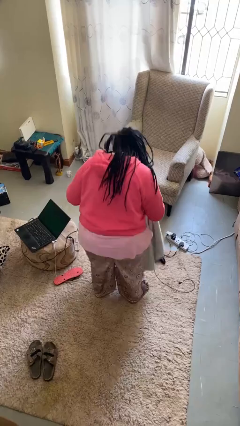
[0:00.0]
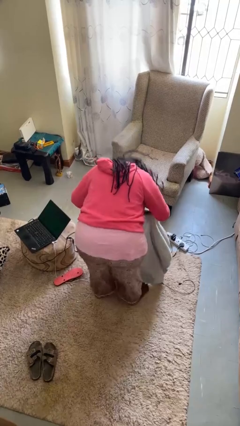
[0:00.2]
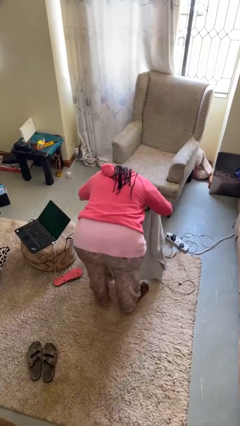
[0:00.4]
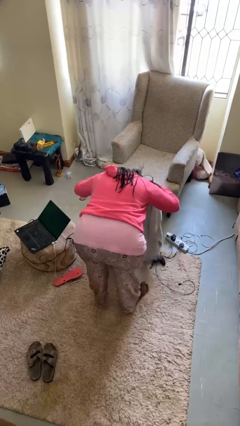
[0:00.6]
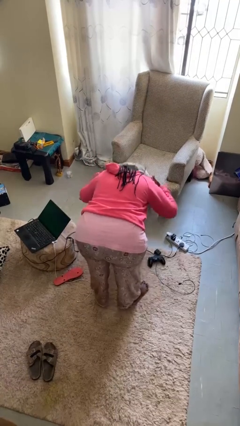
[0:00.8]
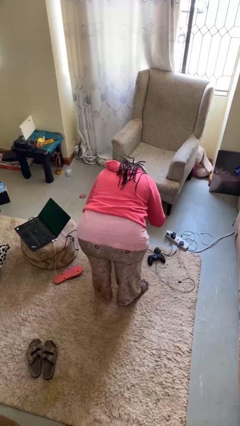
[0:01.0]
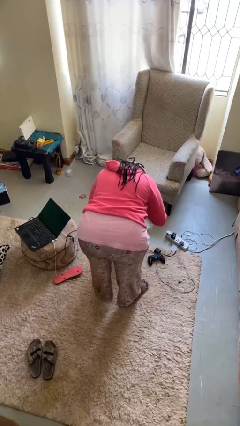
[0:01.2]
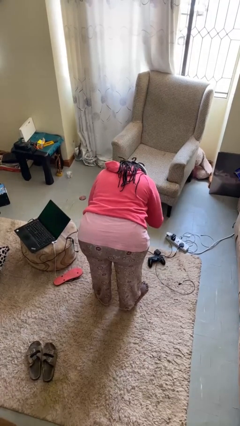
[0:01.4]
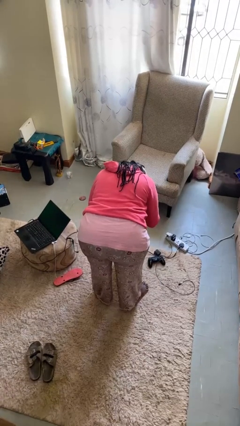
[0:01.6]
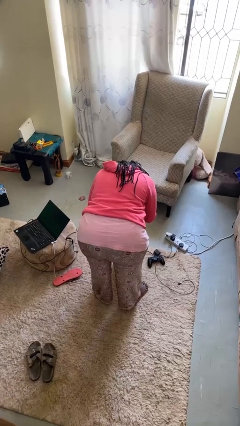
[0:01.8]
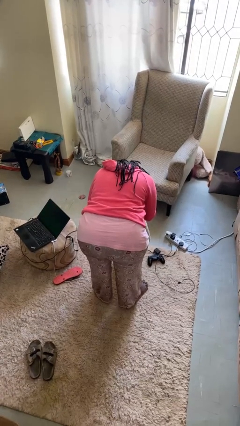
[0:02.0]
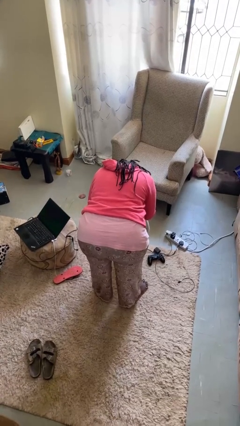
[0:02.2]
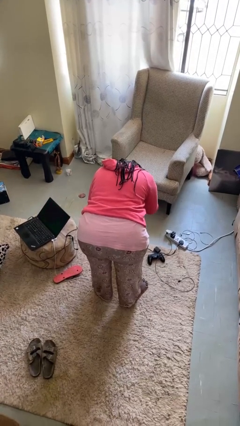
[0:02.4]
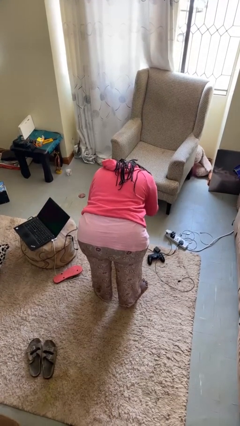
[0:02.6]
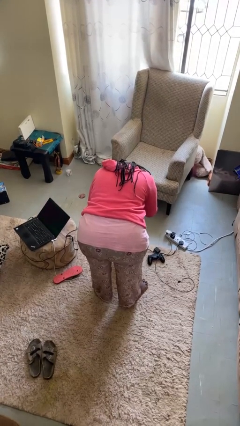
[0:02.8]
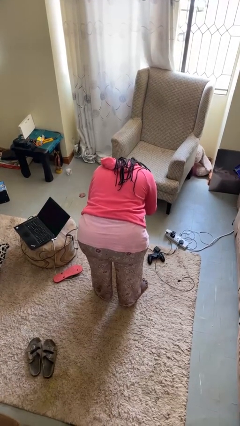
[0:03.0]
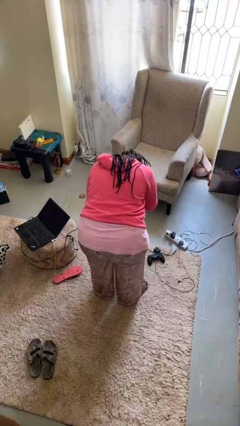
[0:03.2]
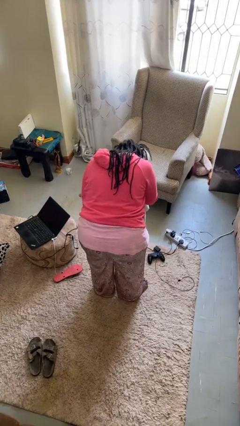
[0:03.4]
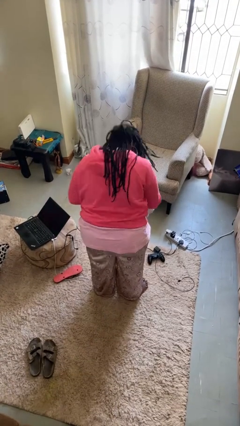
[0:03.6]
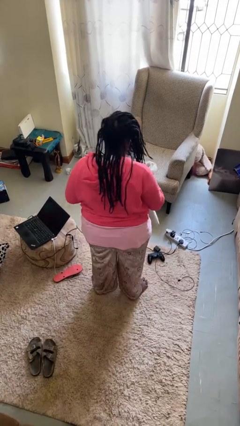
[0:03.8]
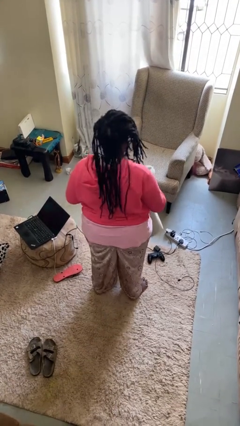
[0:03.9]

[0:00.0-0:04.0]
person dries hair with towel

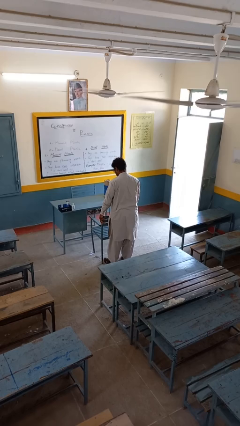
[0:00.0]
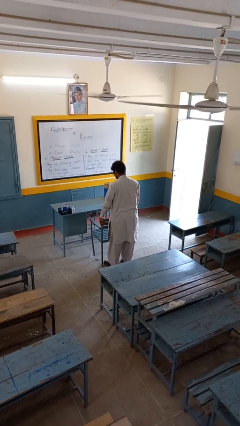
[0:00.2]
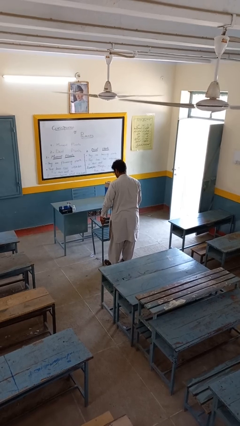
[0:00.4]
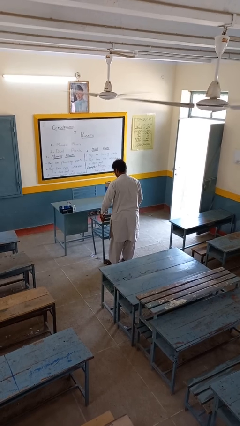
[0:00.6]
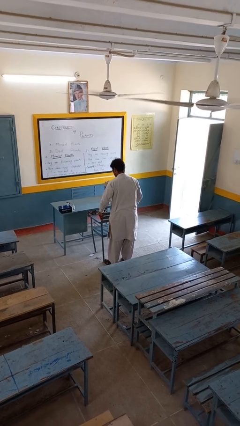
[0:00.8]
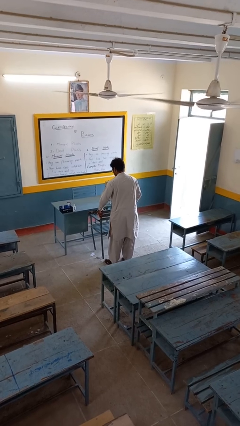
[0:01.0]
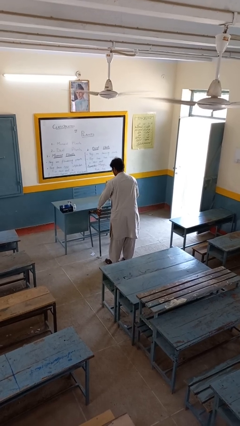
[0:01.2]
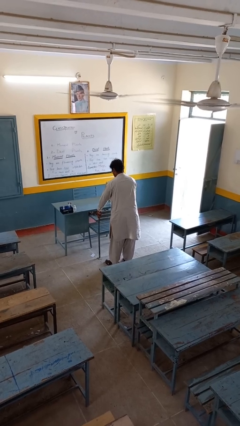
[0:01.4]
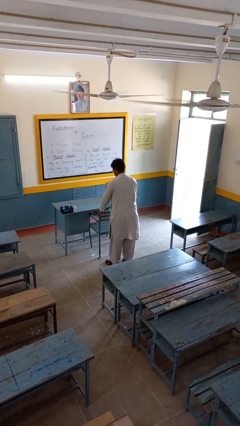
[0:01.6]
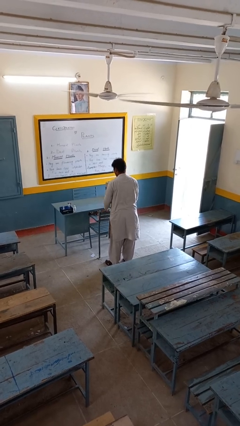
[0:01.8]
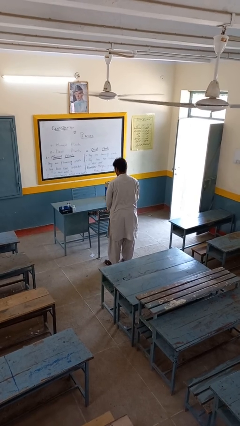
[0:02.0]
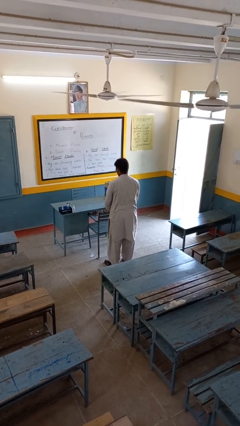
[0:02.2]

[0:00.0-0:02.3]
person pushes in chair

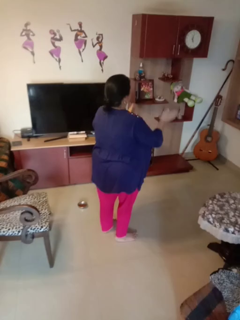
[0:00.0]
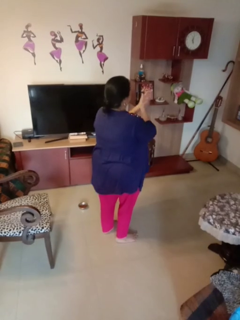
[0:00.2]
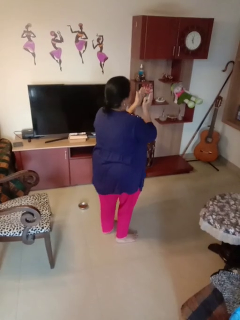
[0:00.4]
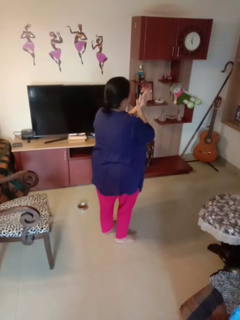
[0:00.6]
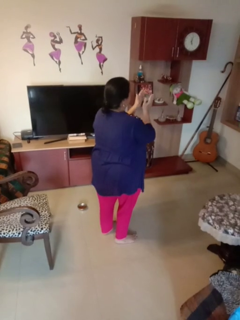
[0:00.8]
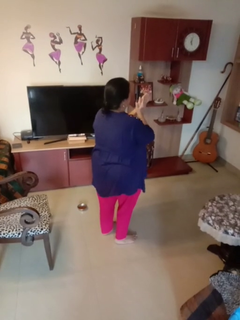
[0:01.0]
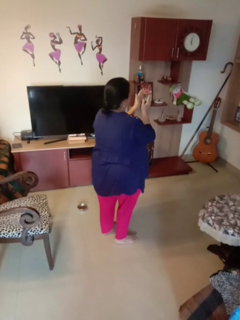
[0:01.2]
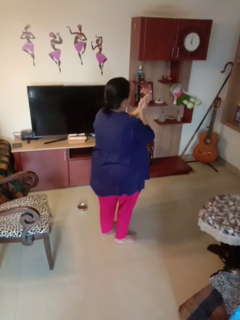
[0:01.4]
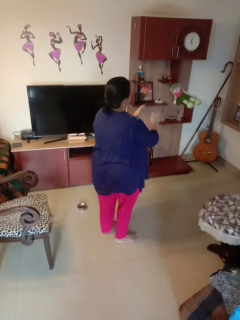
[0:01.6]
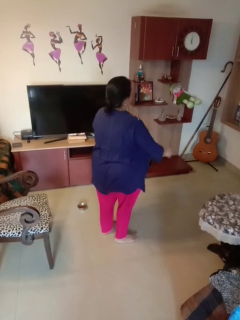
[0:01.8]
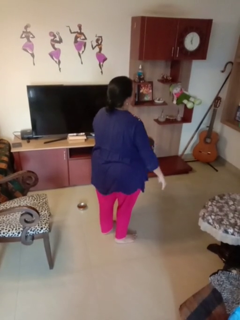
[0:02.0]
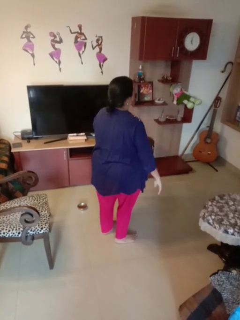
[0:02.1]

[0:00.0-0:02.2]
person claps hands

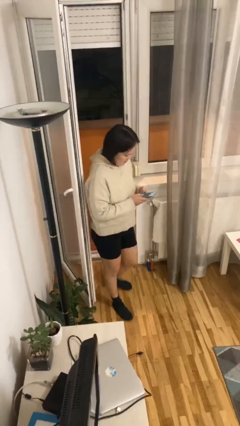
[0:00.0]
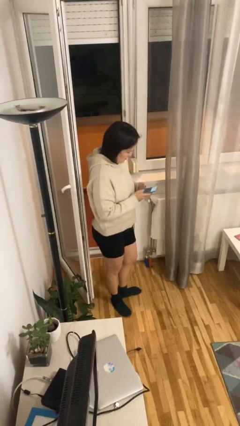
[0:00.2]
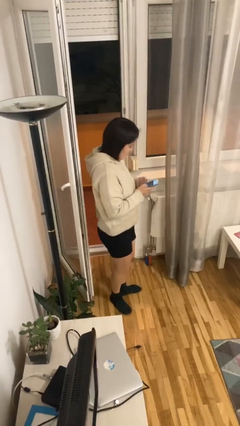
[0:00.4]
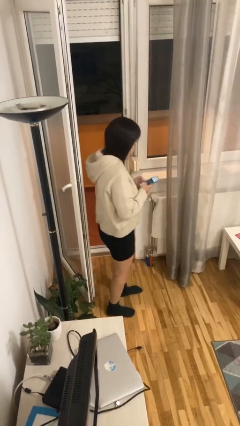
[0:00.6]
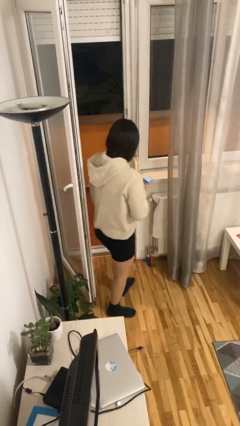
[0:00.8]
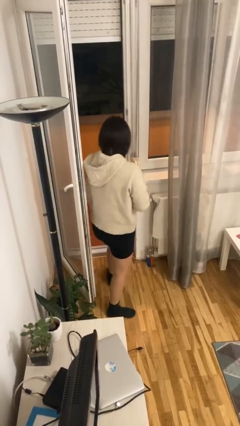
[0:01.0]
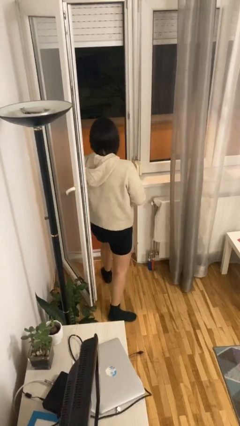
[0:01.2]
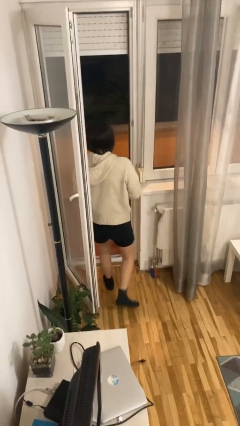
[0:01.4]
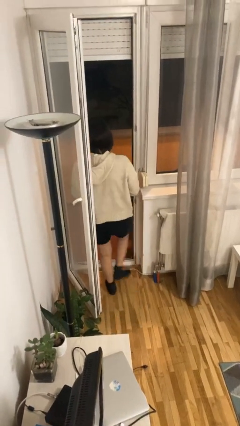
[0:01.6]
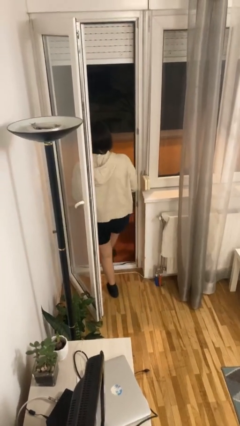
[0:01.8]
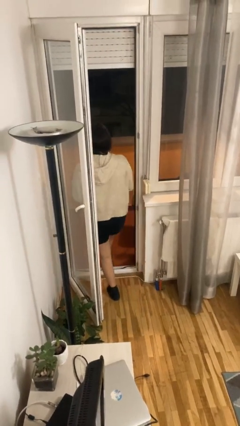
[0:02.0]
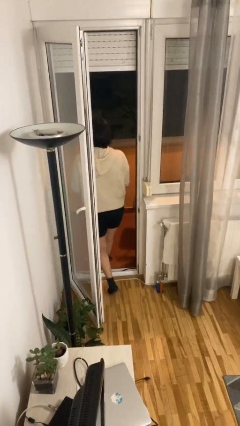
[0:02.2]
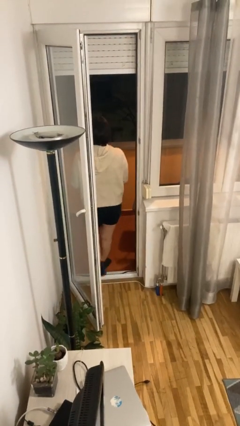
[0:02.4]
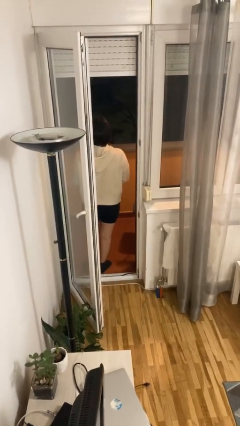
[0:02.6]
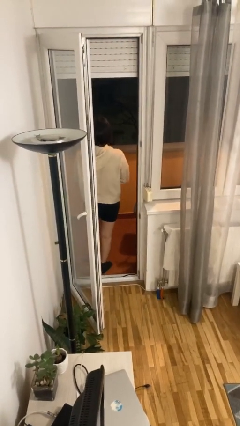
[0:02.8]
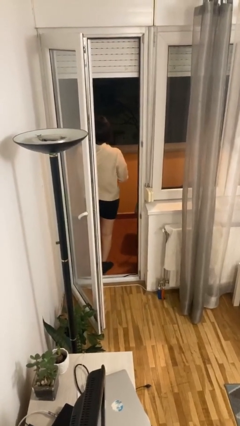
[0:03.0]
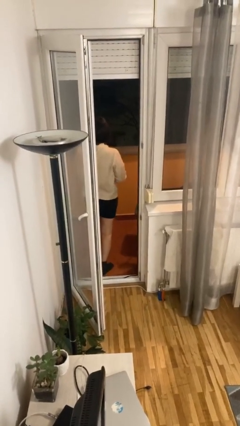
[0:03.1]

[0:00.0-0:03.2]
person exits scene through structure

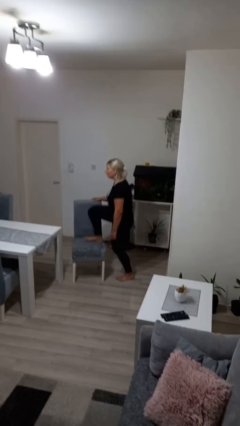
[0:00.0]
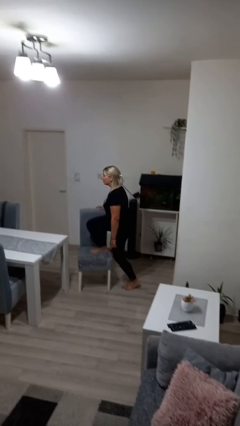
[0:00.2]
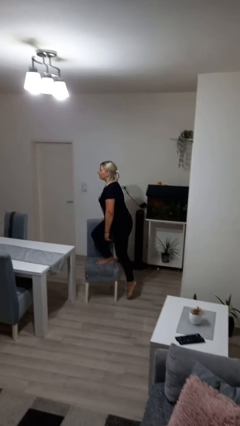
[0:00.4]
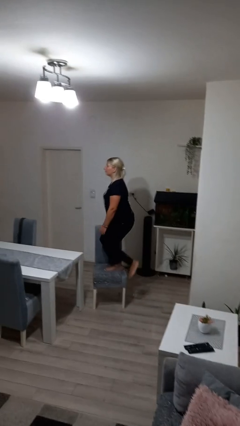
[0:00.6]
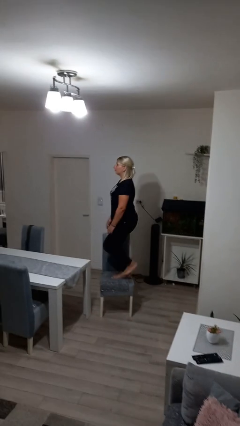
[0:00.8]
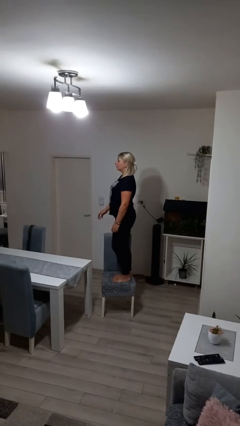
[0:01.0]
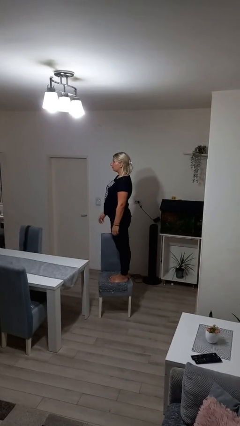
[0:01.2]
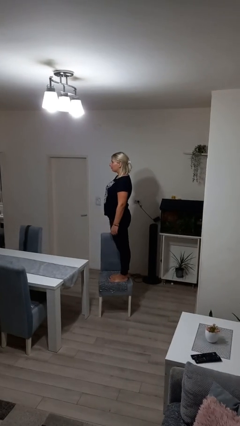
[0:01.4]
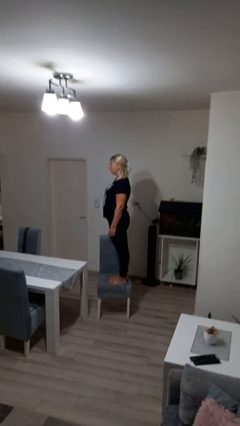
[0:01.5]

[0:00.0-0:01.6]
person climbs on chair

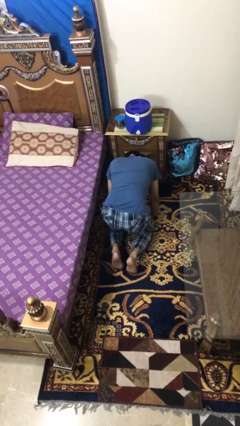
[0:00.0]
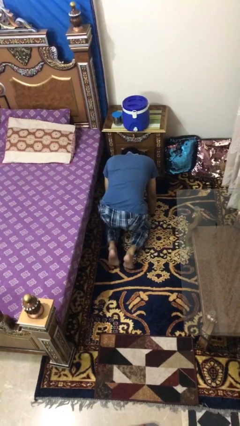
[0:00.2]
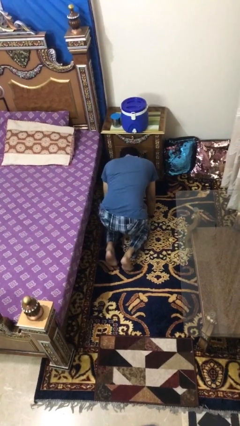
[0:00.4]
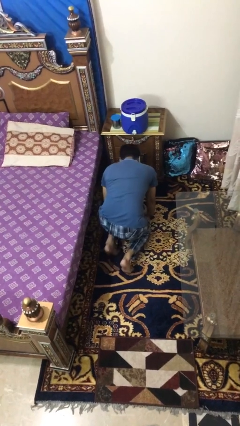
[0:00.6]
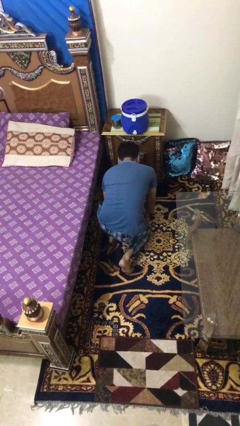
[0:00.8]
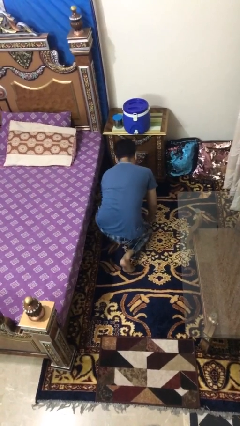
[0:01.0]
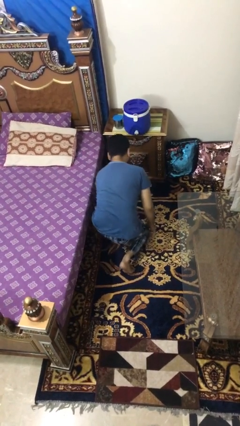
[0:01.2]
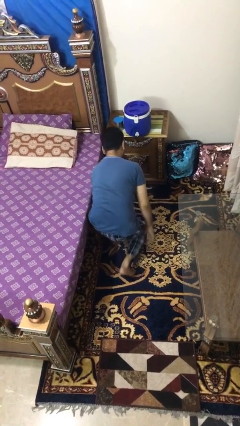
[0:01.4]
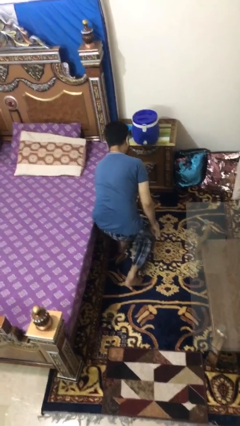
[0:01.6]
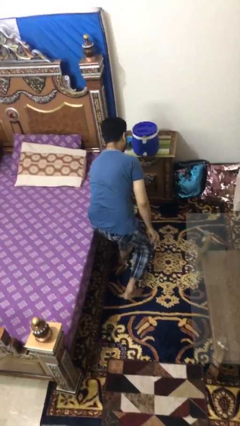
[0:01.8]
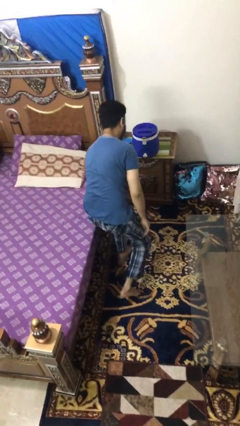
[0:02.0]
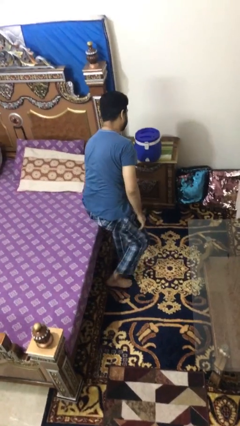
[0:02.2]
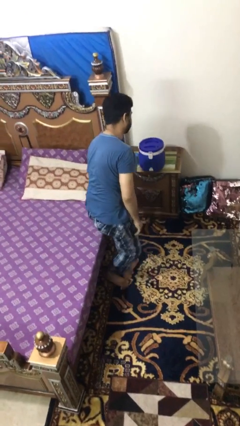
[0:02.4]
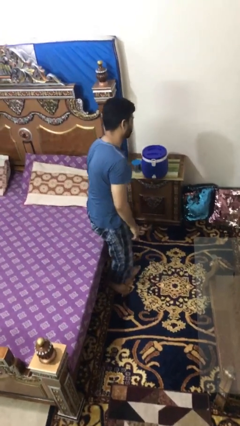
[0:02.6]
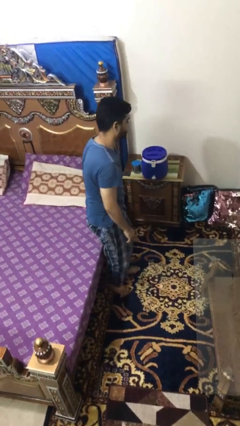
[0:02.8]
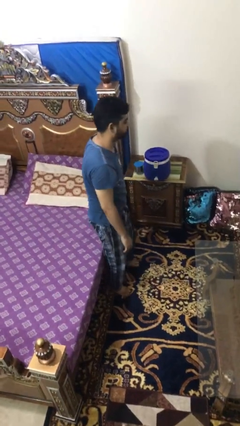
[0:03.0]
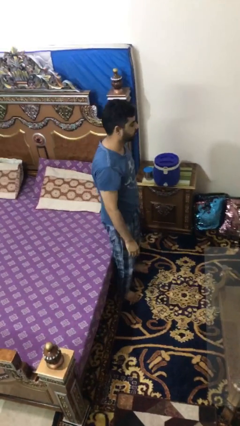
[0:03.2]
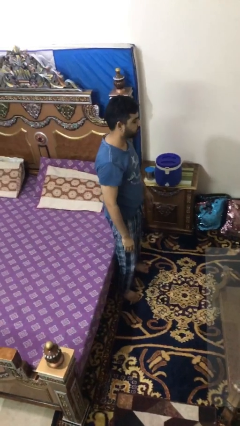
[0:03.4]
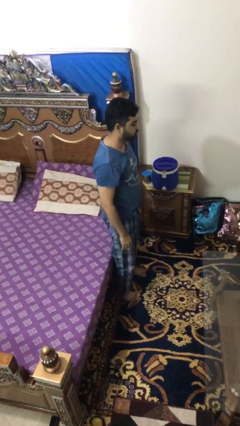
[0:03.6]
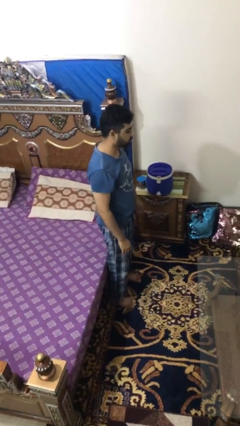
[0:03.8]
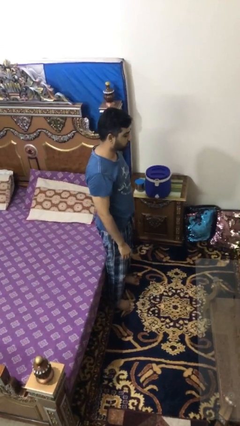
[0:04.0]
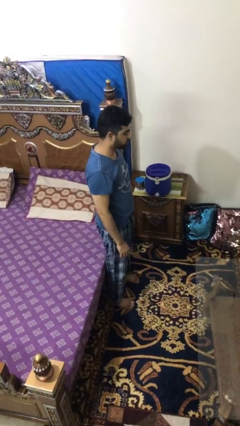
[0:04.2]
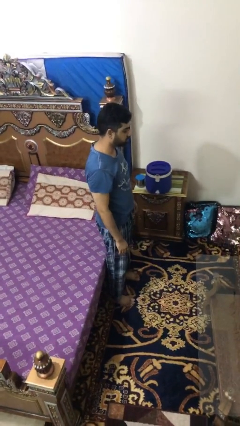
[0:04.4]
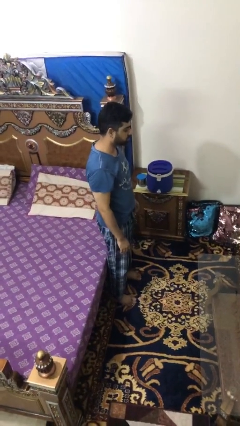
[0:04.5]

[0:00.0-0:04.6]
person stands up from floor
